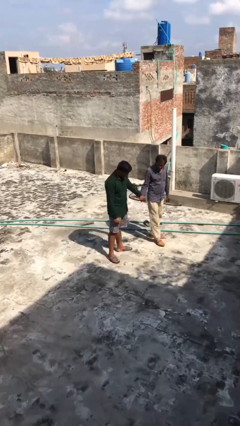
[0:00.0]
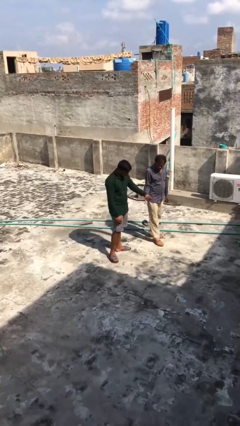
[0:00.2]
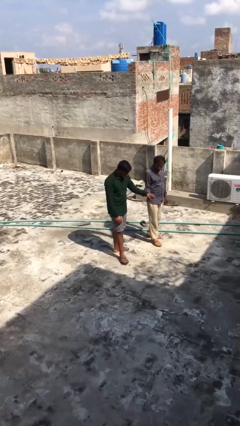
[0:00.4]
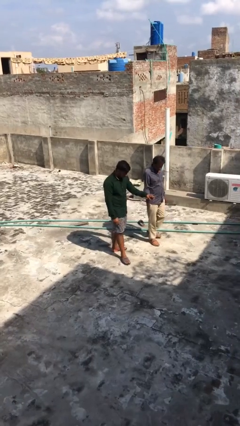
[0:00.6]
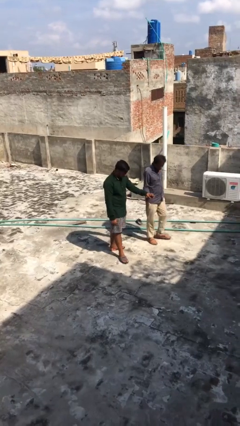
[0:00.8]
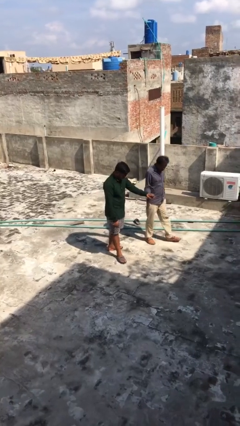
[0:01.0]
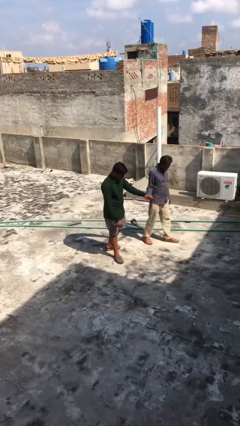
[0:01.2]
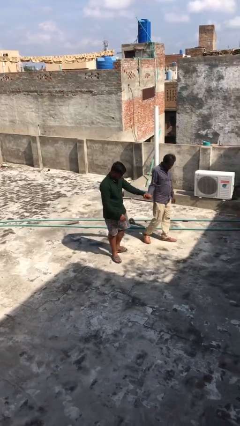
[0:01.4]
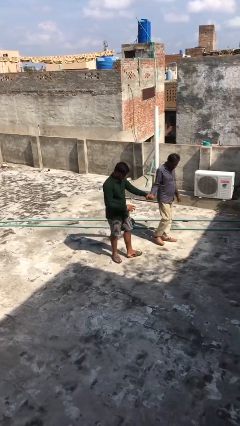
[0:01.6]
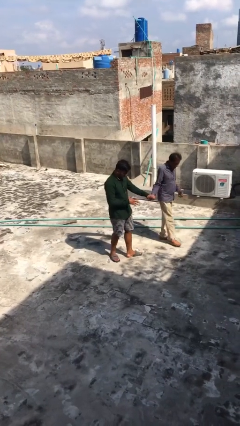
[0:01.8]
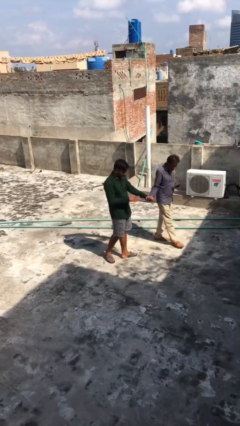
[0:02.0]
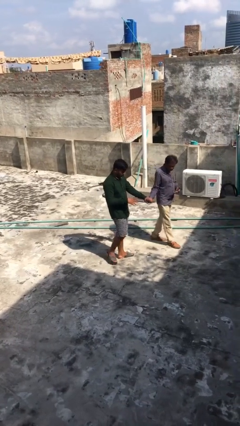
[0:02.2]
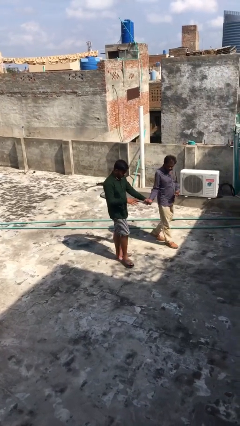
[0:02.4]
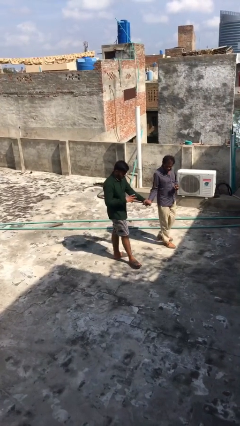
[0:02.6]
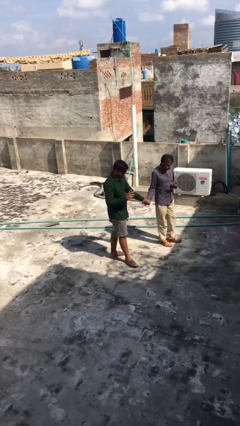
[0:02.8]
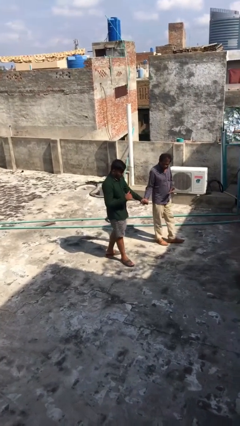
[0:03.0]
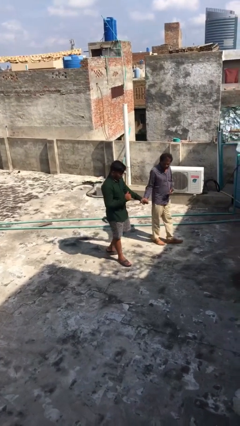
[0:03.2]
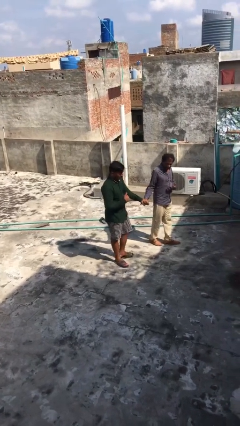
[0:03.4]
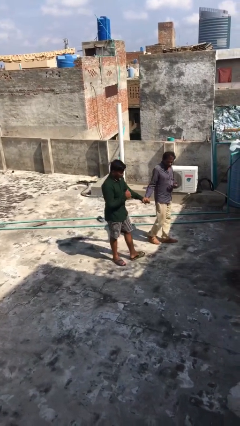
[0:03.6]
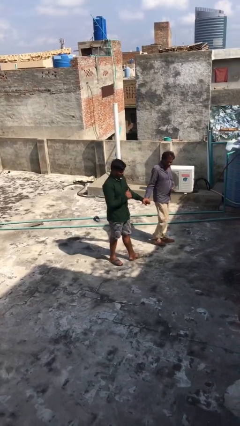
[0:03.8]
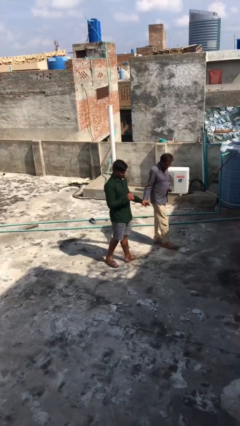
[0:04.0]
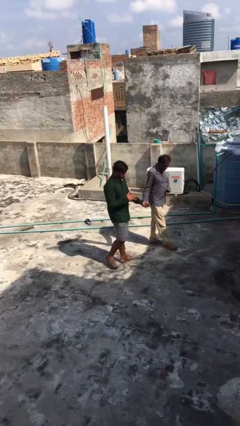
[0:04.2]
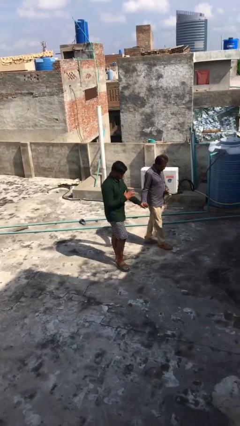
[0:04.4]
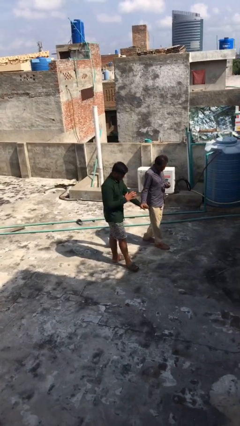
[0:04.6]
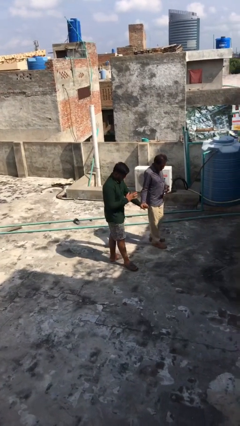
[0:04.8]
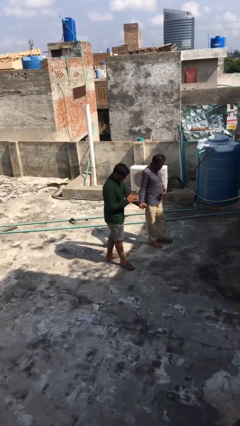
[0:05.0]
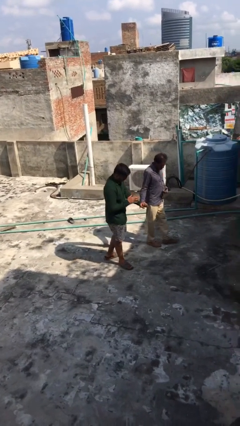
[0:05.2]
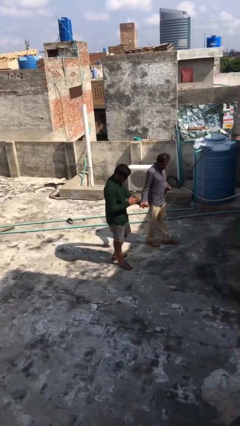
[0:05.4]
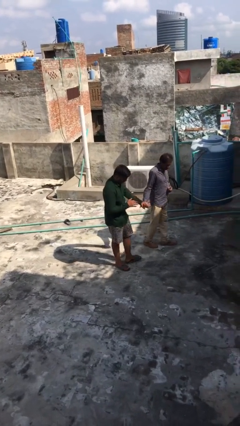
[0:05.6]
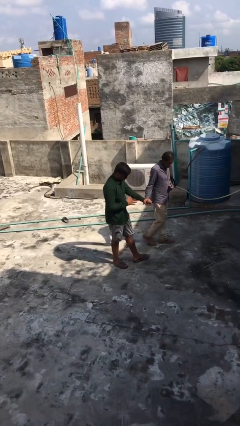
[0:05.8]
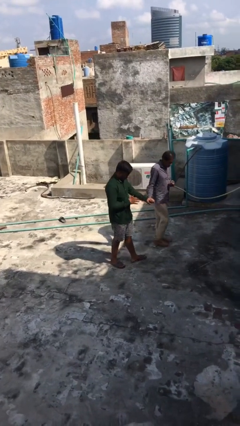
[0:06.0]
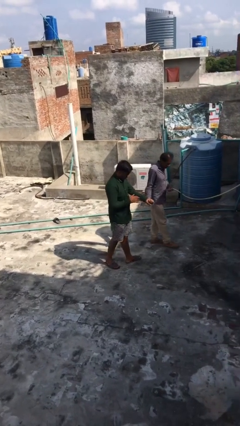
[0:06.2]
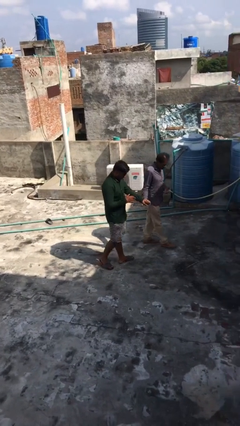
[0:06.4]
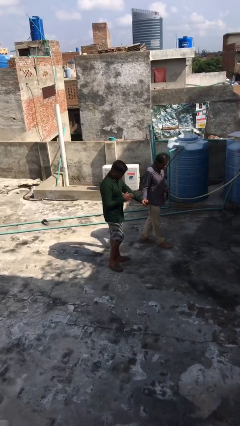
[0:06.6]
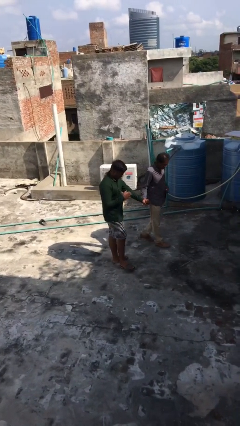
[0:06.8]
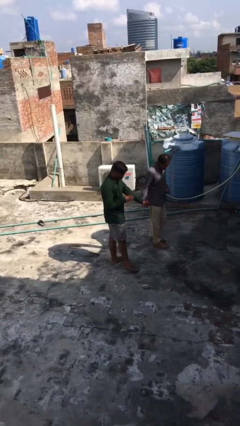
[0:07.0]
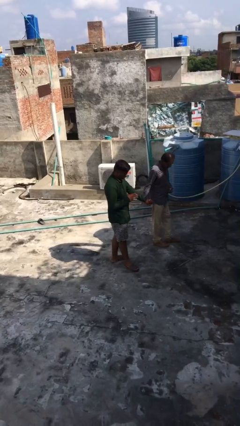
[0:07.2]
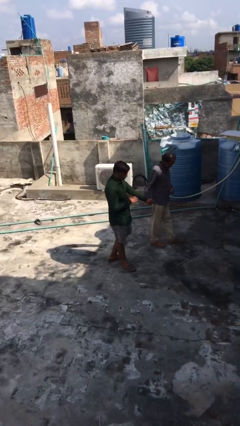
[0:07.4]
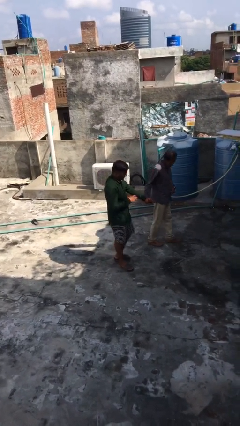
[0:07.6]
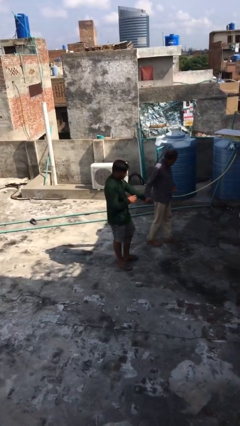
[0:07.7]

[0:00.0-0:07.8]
person holds hand

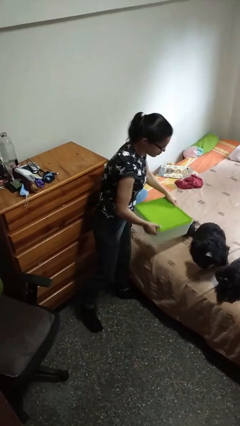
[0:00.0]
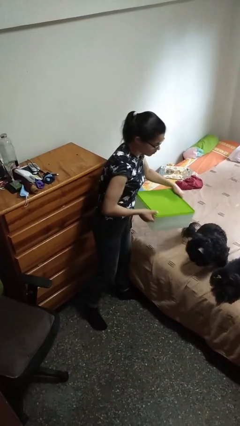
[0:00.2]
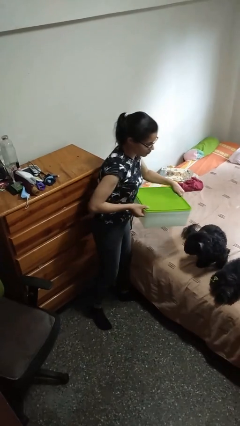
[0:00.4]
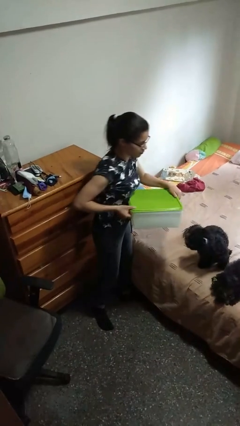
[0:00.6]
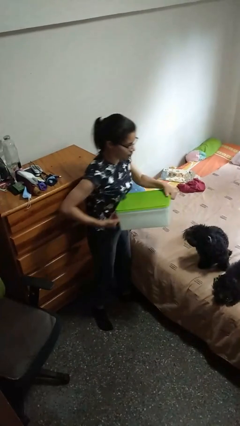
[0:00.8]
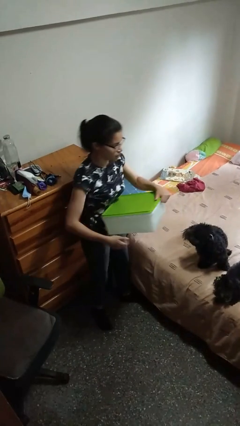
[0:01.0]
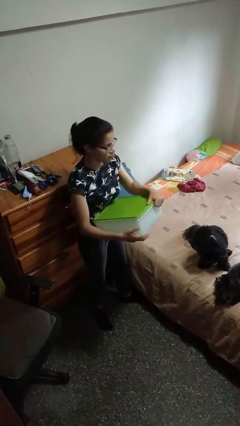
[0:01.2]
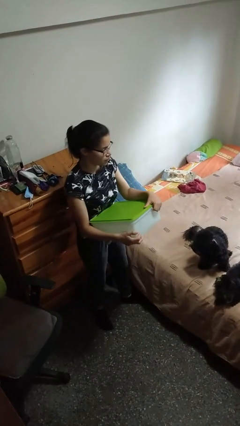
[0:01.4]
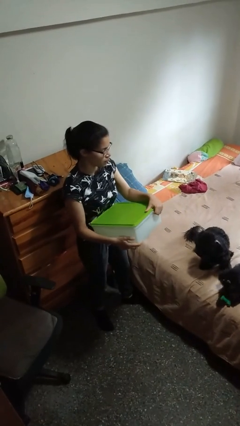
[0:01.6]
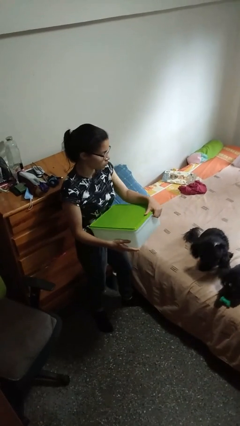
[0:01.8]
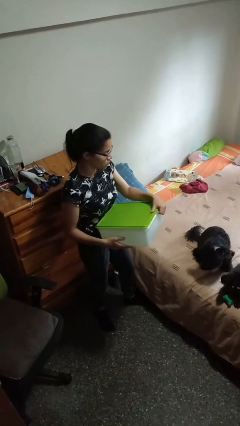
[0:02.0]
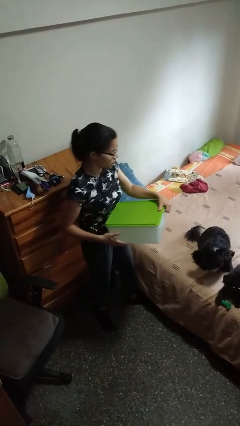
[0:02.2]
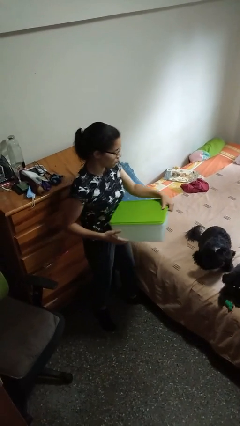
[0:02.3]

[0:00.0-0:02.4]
person picks up object from bed

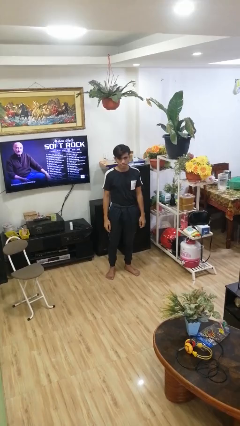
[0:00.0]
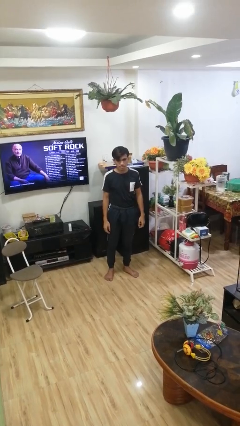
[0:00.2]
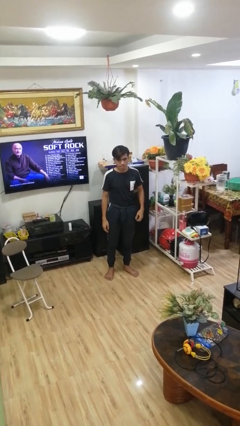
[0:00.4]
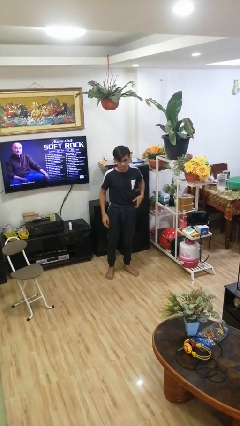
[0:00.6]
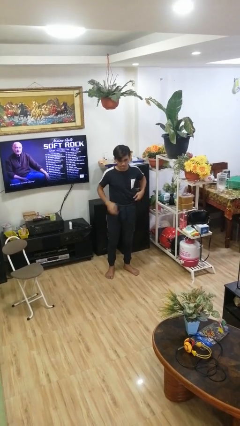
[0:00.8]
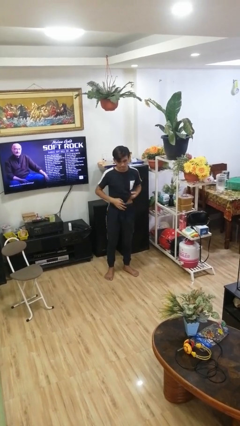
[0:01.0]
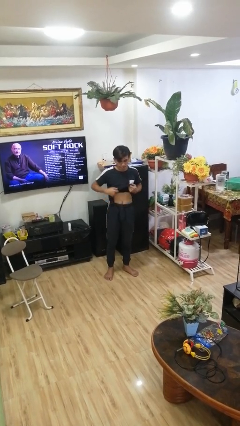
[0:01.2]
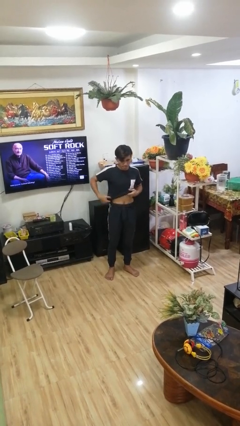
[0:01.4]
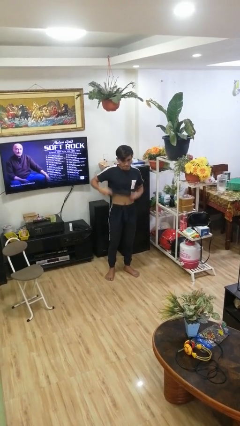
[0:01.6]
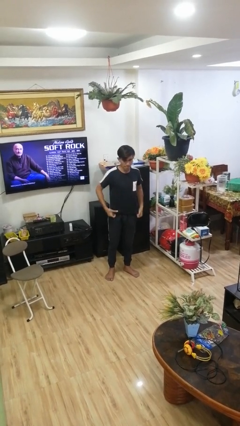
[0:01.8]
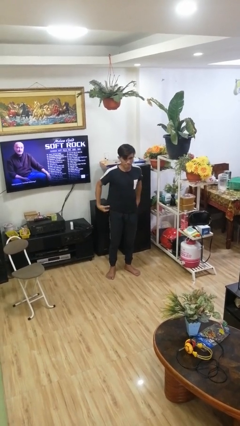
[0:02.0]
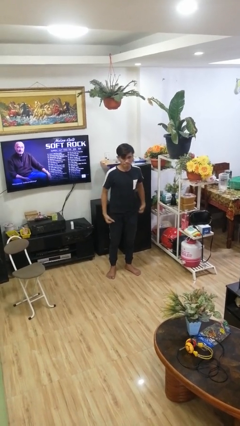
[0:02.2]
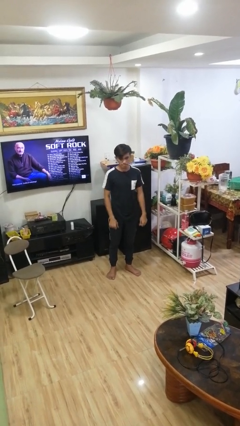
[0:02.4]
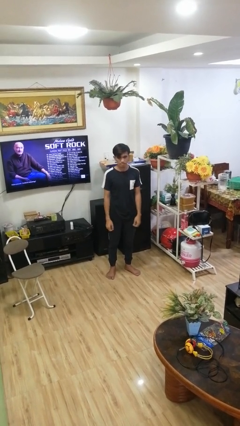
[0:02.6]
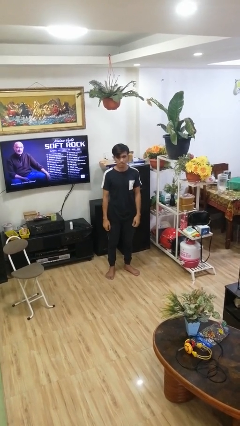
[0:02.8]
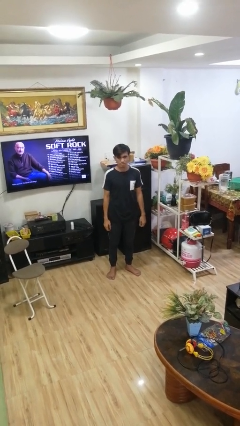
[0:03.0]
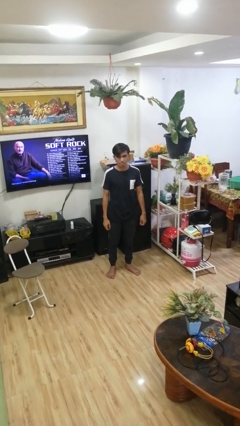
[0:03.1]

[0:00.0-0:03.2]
person untucks shirt

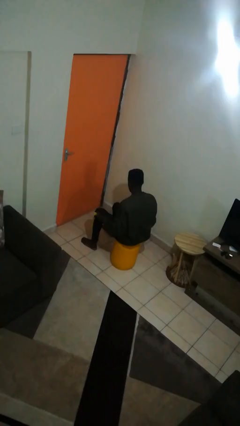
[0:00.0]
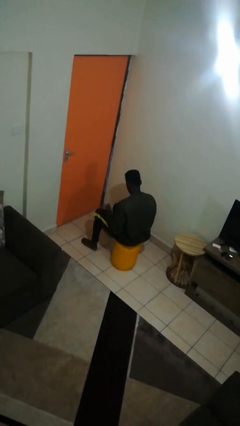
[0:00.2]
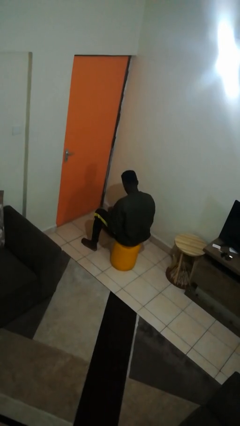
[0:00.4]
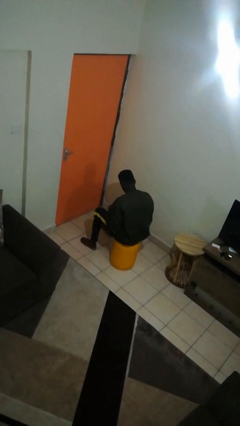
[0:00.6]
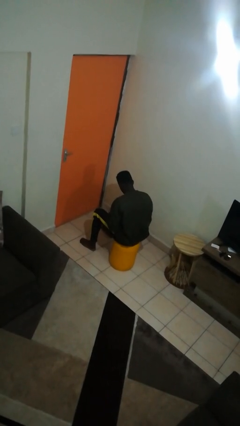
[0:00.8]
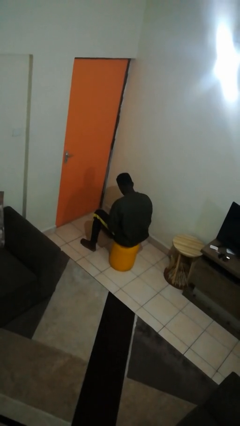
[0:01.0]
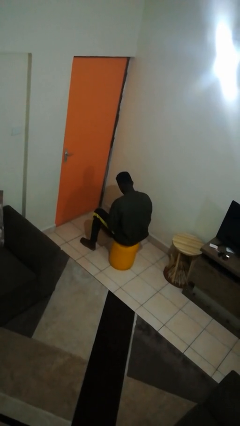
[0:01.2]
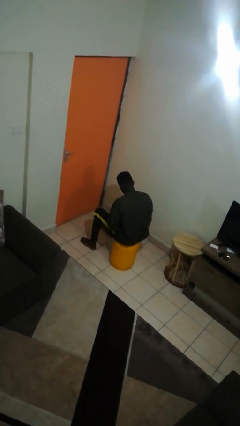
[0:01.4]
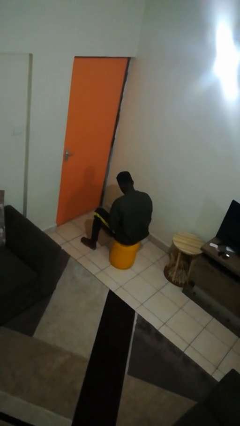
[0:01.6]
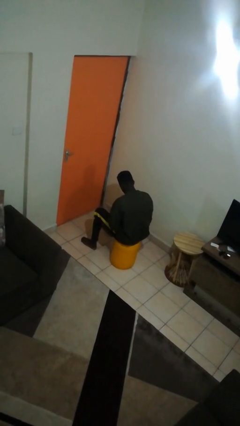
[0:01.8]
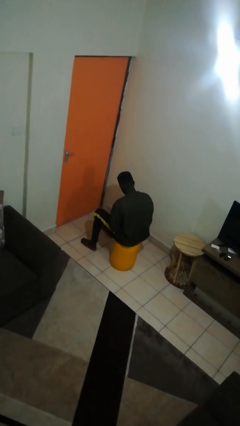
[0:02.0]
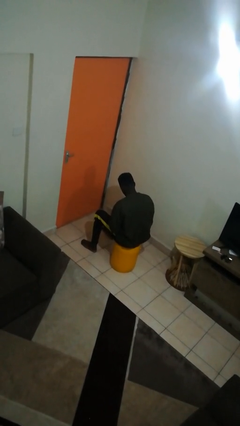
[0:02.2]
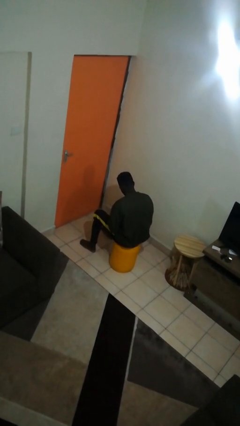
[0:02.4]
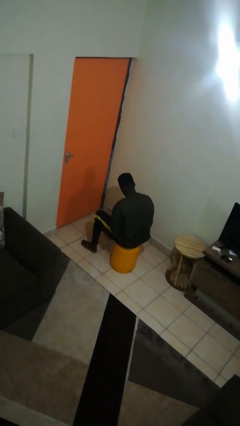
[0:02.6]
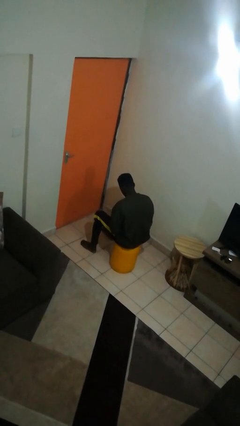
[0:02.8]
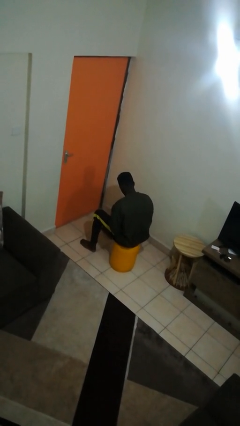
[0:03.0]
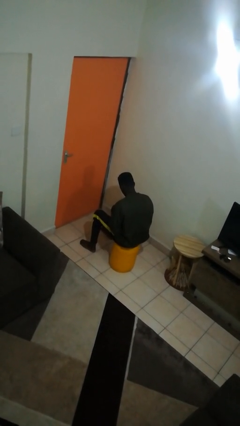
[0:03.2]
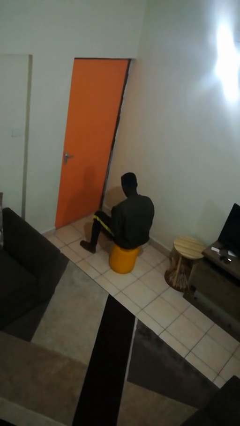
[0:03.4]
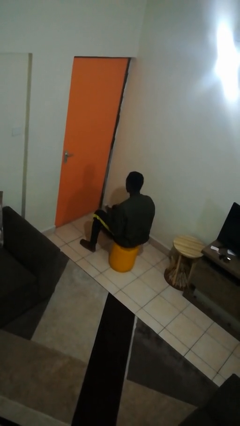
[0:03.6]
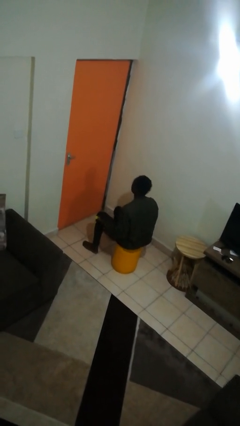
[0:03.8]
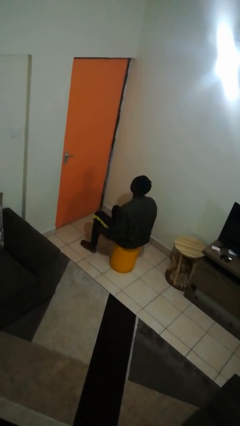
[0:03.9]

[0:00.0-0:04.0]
person looks at hands in lap

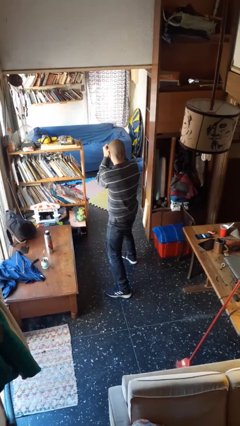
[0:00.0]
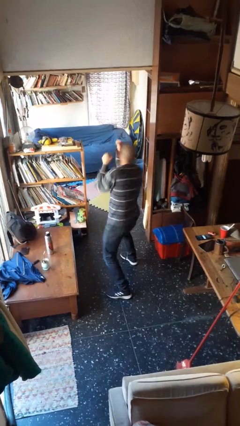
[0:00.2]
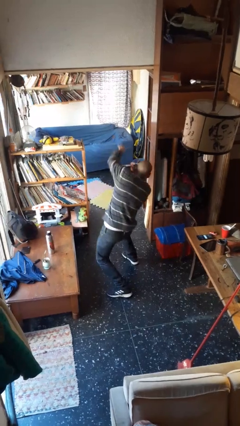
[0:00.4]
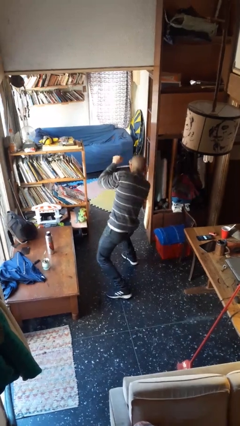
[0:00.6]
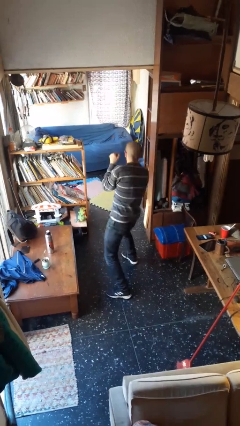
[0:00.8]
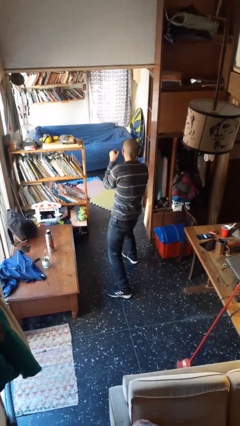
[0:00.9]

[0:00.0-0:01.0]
person punches
